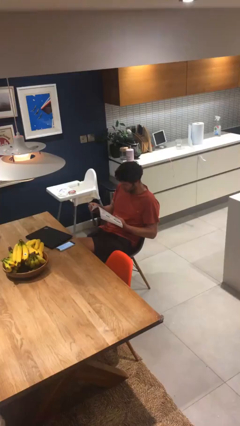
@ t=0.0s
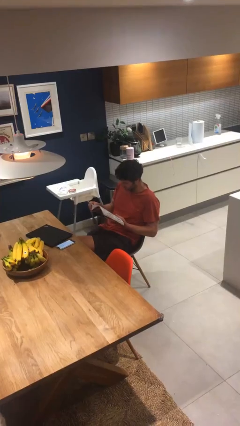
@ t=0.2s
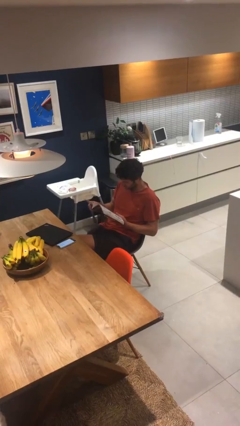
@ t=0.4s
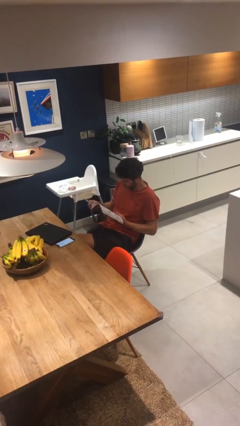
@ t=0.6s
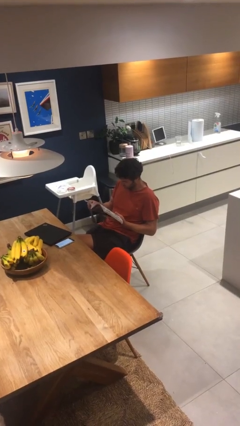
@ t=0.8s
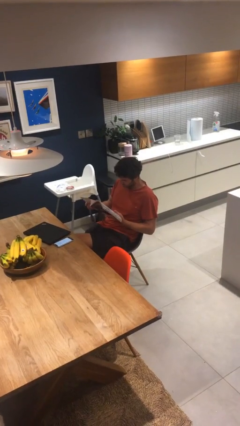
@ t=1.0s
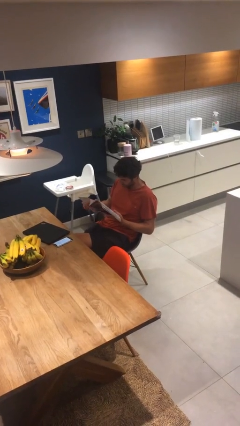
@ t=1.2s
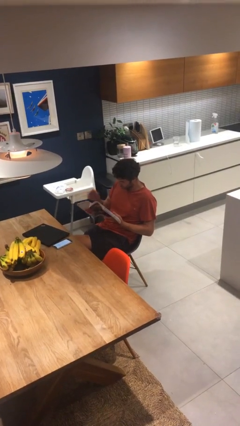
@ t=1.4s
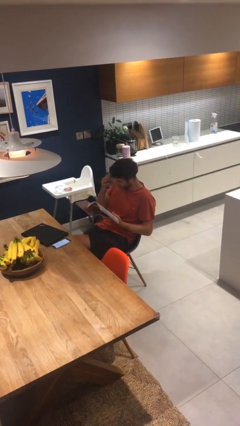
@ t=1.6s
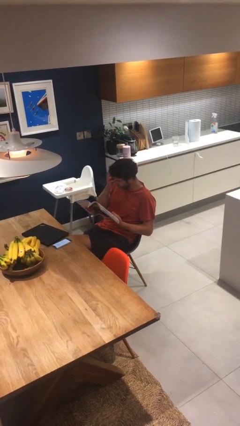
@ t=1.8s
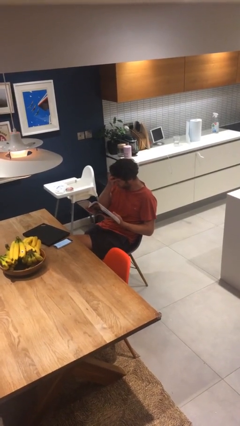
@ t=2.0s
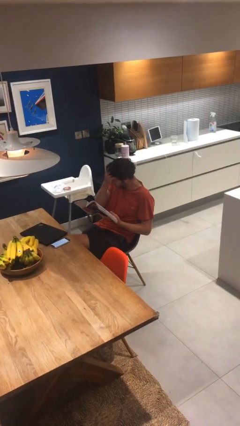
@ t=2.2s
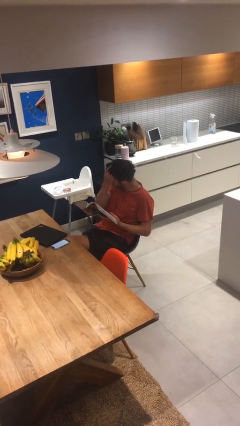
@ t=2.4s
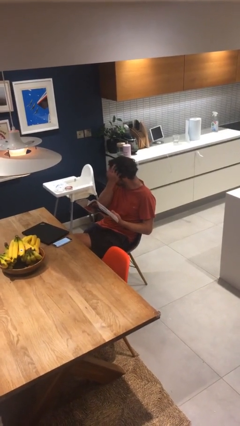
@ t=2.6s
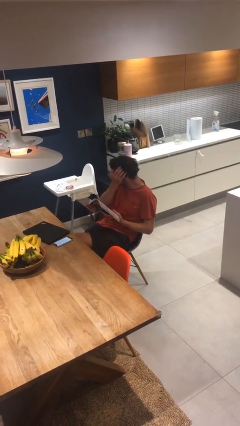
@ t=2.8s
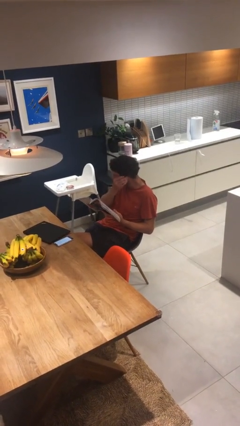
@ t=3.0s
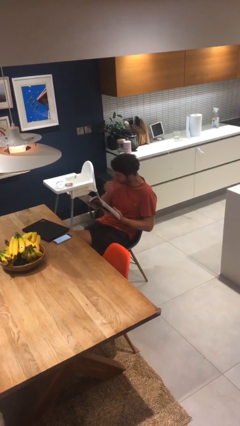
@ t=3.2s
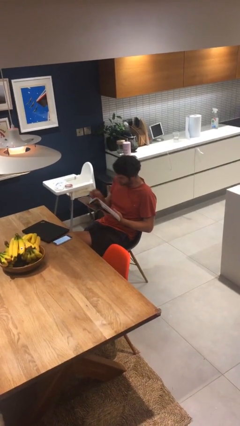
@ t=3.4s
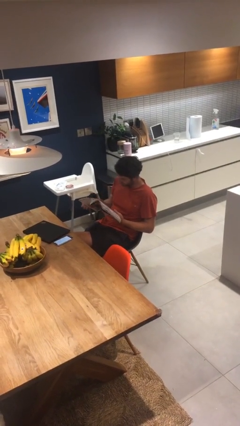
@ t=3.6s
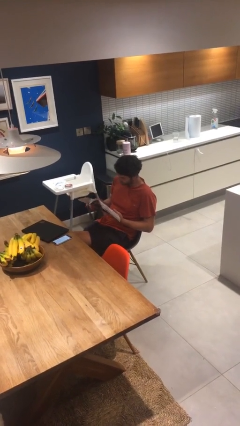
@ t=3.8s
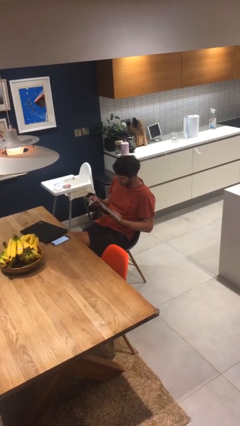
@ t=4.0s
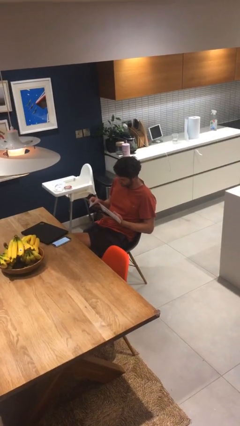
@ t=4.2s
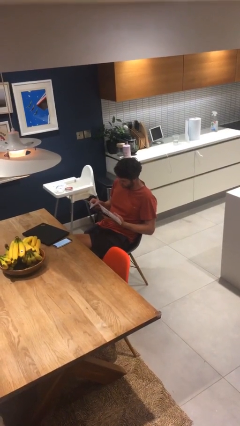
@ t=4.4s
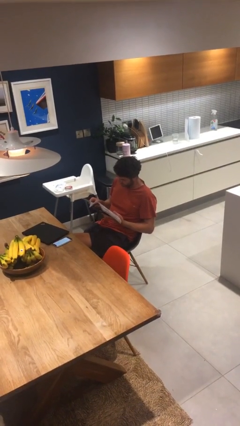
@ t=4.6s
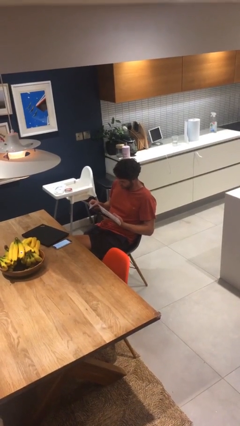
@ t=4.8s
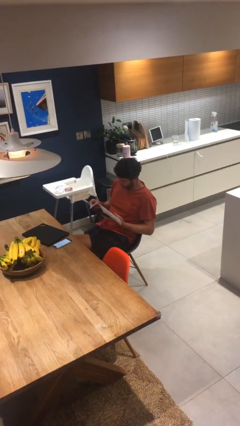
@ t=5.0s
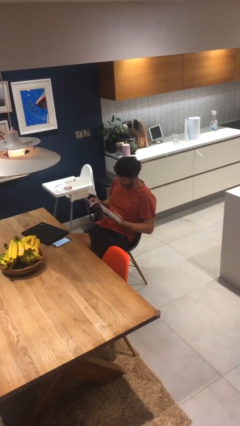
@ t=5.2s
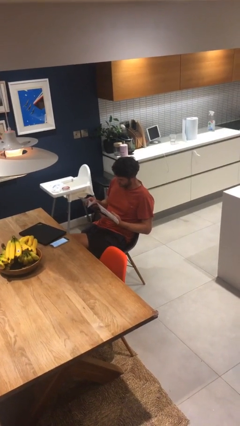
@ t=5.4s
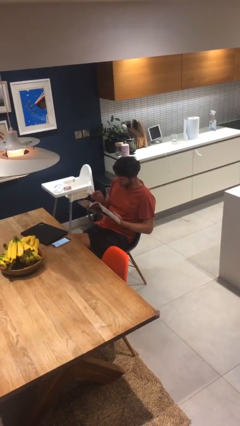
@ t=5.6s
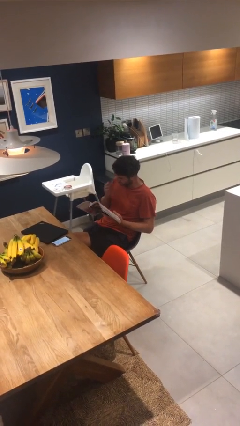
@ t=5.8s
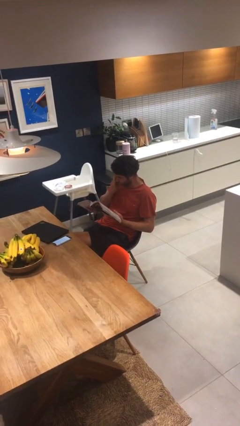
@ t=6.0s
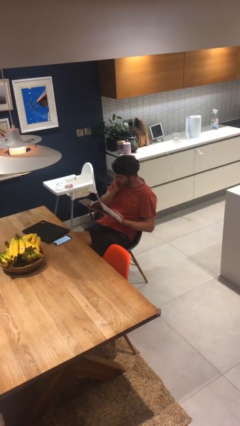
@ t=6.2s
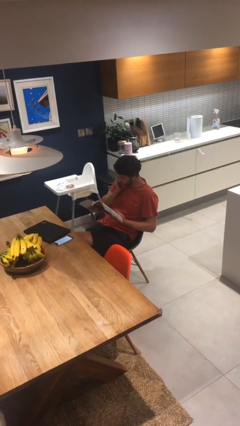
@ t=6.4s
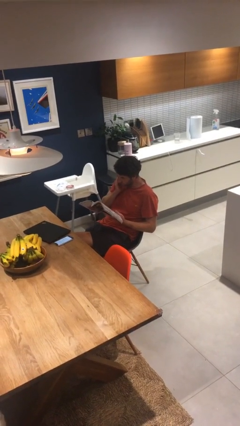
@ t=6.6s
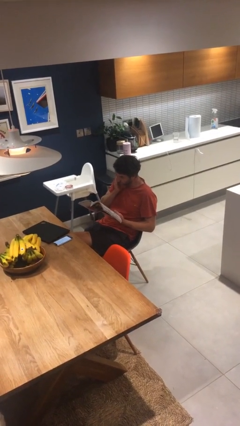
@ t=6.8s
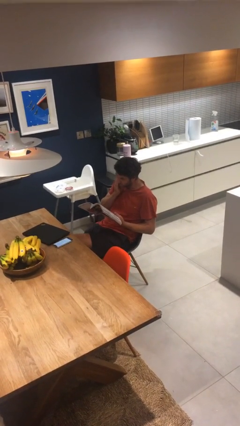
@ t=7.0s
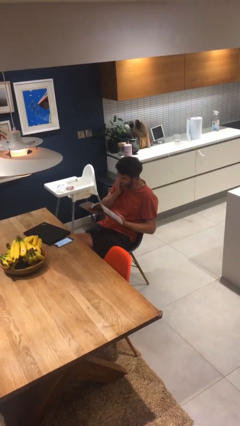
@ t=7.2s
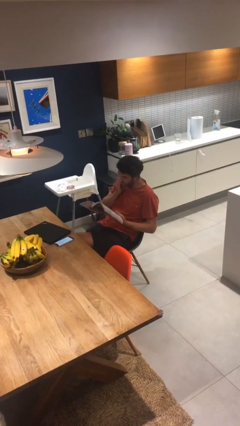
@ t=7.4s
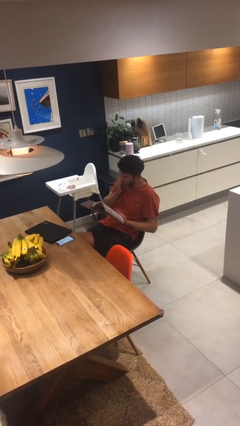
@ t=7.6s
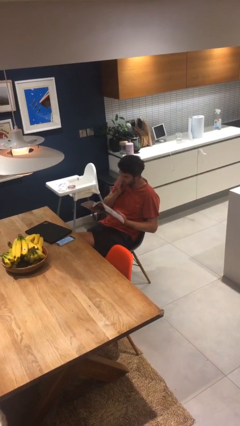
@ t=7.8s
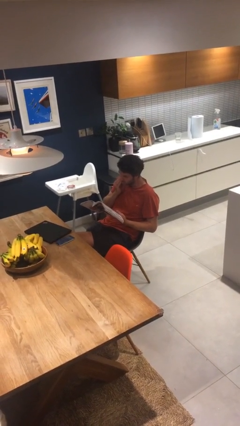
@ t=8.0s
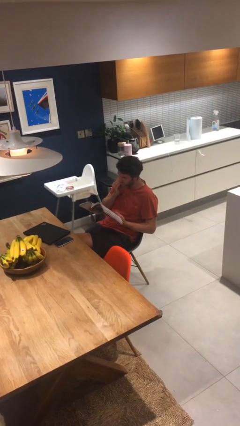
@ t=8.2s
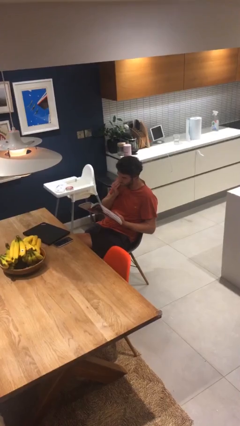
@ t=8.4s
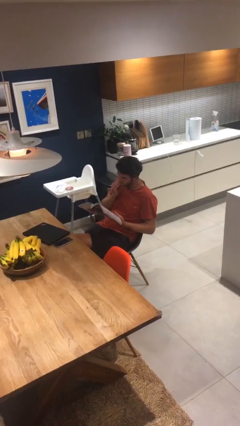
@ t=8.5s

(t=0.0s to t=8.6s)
person reads document

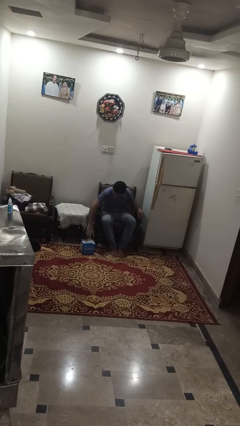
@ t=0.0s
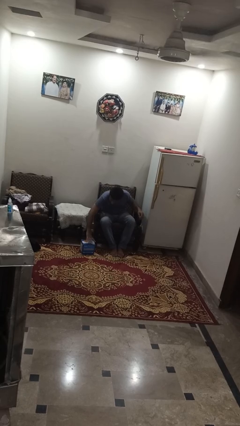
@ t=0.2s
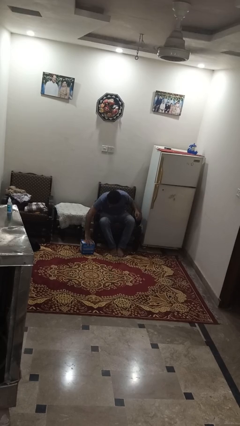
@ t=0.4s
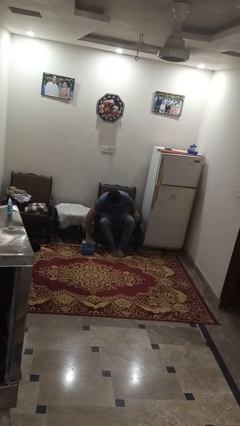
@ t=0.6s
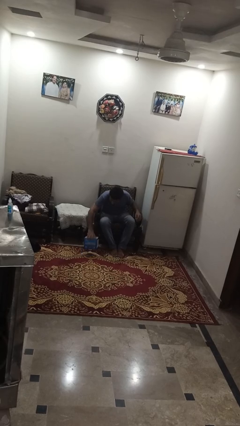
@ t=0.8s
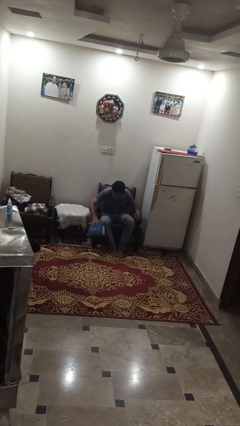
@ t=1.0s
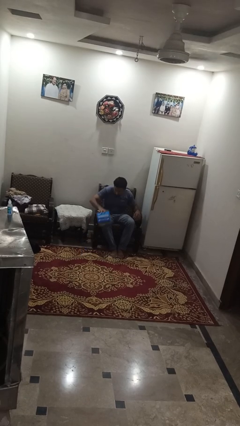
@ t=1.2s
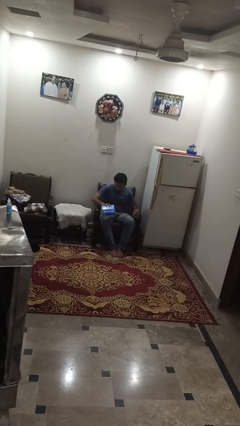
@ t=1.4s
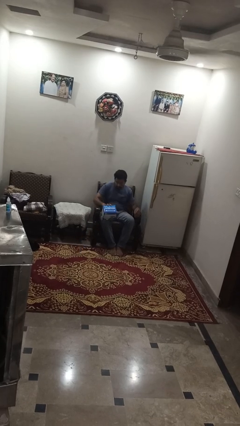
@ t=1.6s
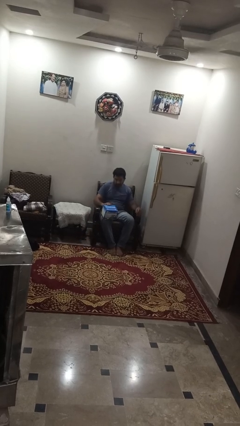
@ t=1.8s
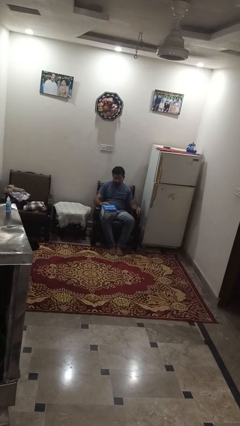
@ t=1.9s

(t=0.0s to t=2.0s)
person picks up object from floor

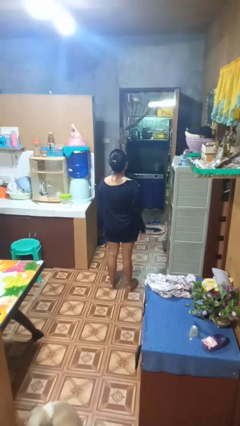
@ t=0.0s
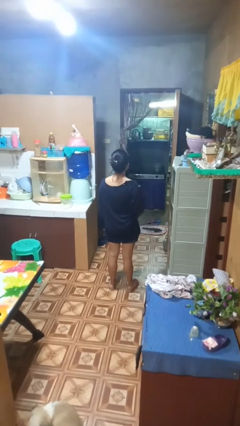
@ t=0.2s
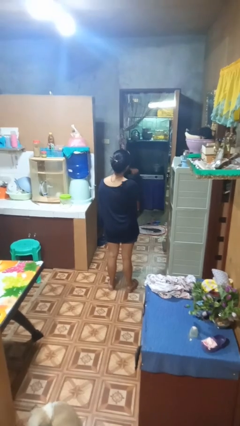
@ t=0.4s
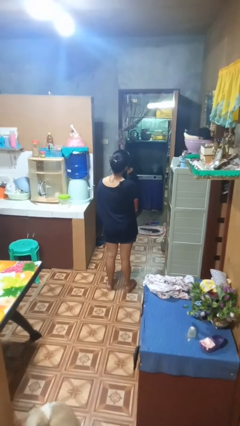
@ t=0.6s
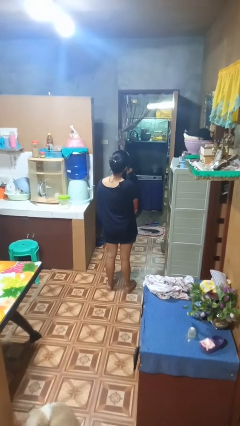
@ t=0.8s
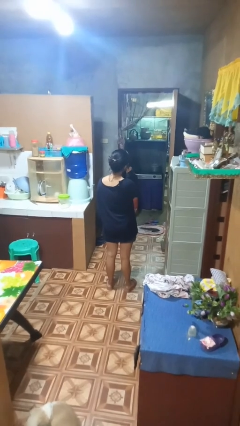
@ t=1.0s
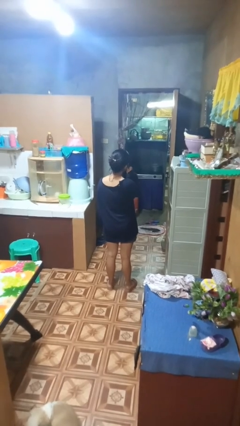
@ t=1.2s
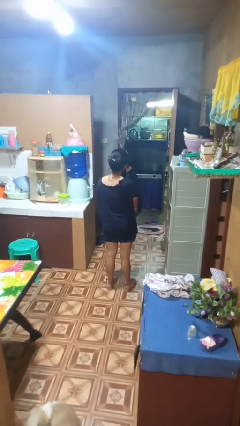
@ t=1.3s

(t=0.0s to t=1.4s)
person gestures call me

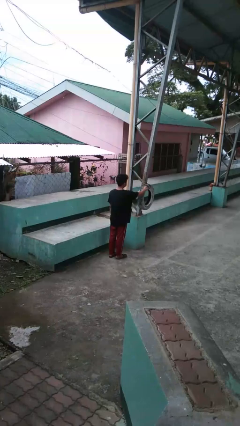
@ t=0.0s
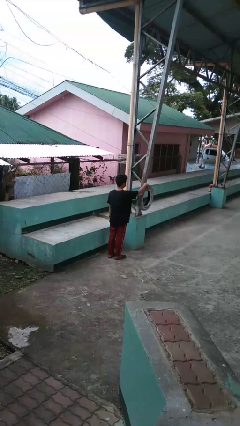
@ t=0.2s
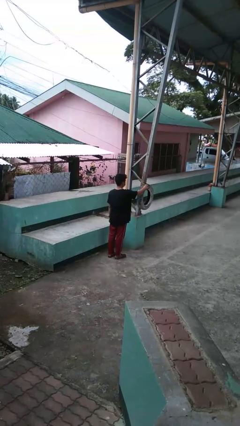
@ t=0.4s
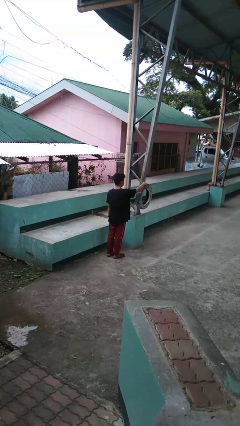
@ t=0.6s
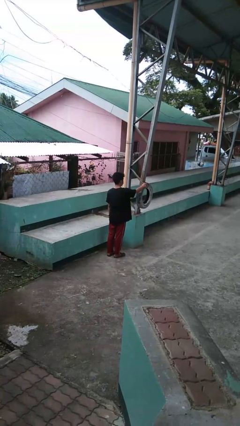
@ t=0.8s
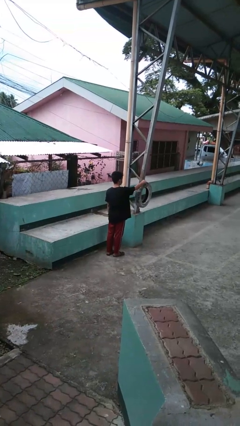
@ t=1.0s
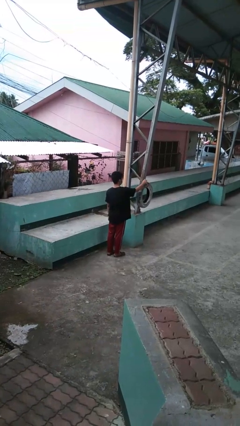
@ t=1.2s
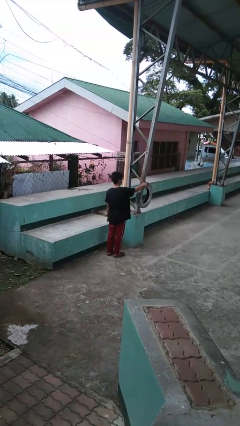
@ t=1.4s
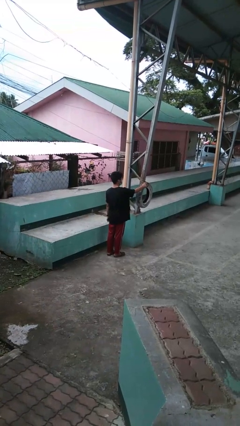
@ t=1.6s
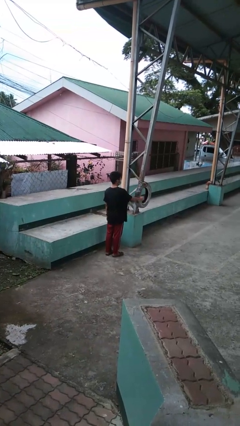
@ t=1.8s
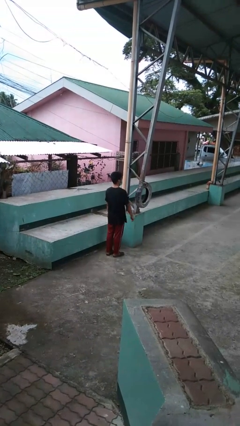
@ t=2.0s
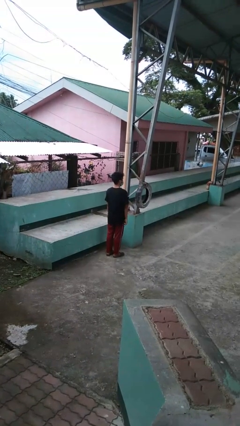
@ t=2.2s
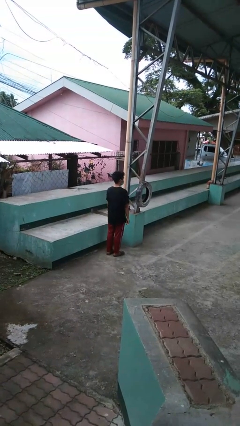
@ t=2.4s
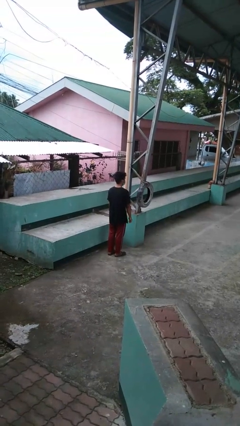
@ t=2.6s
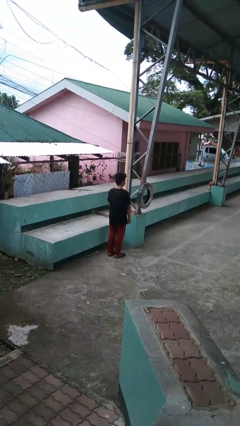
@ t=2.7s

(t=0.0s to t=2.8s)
person taps object with finger

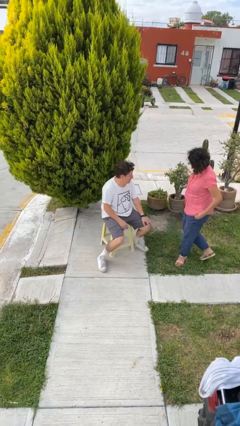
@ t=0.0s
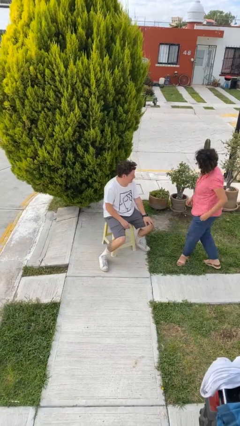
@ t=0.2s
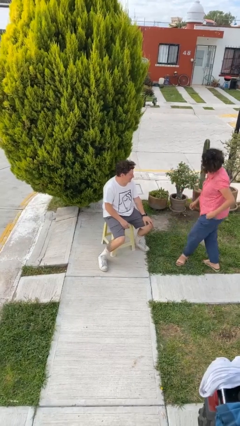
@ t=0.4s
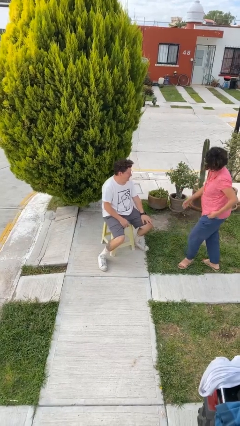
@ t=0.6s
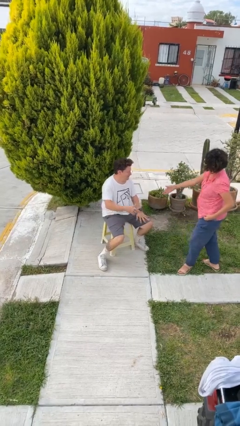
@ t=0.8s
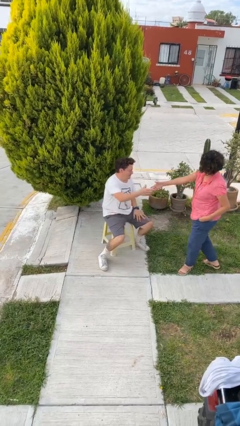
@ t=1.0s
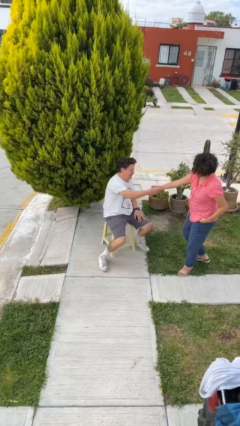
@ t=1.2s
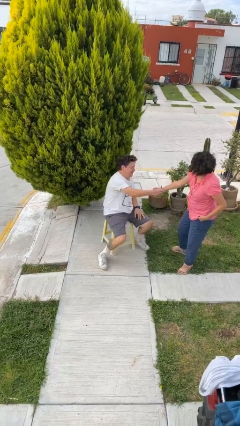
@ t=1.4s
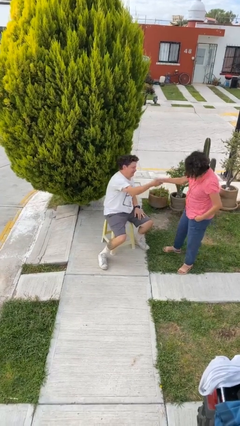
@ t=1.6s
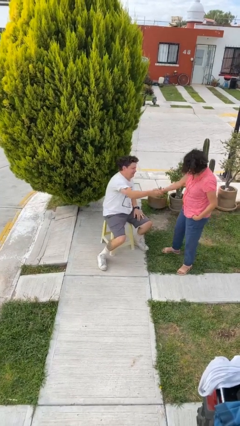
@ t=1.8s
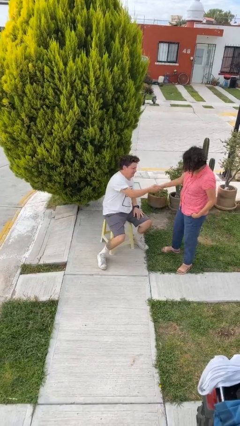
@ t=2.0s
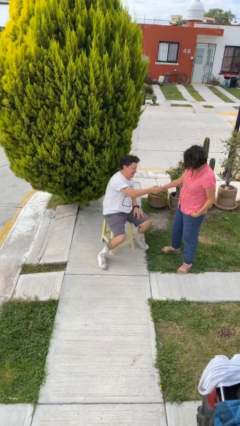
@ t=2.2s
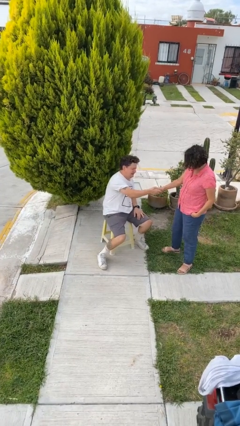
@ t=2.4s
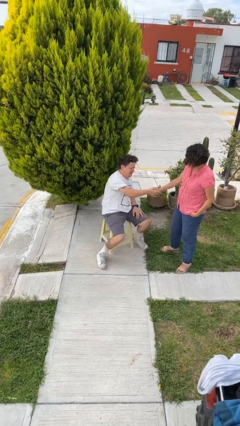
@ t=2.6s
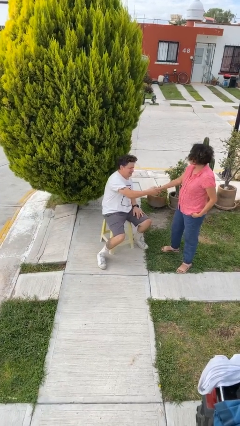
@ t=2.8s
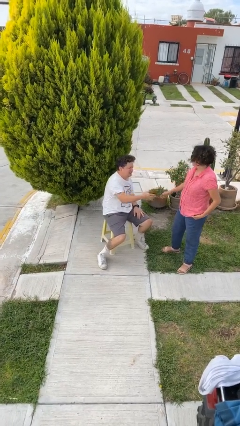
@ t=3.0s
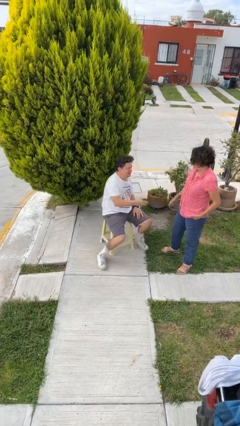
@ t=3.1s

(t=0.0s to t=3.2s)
person shakes hand
